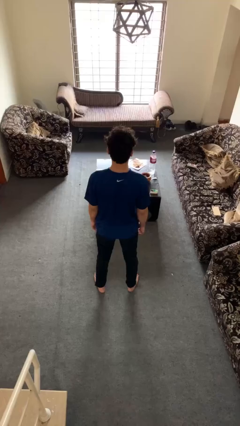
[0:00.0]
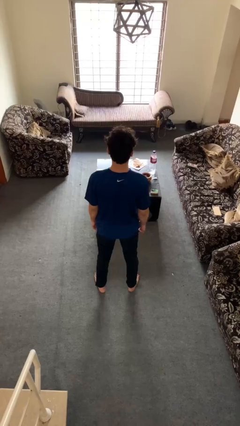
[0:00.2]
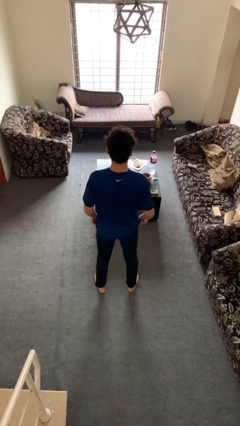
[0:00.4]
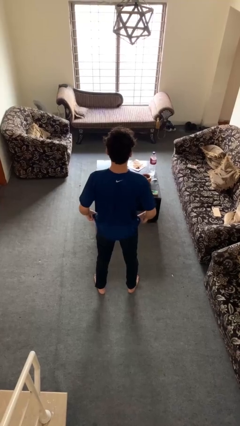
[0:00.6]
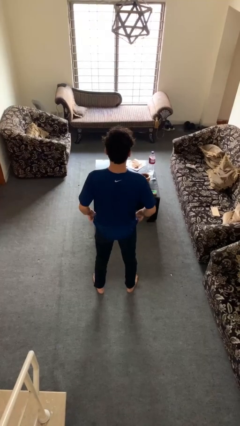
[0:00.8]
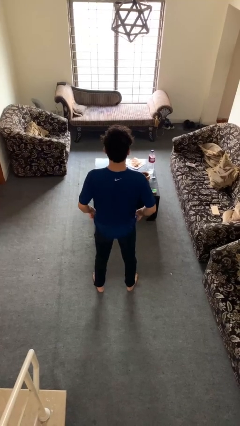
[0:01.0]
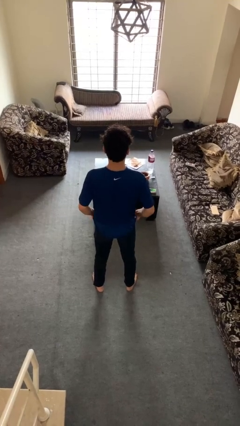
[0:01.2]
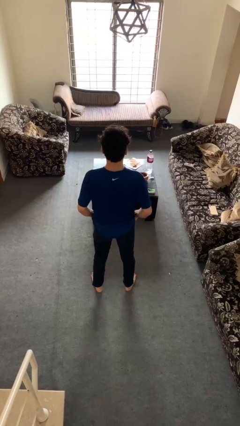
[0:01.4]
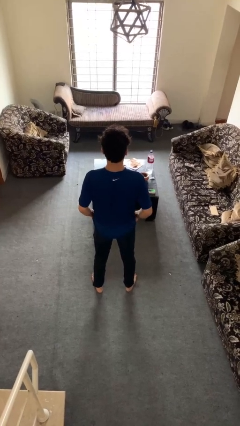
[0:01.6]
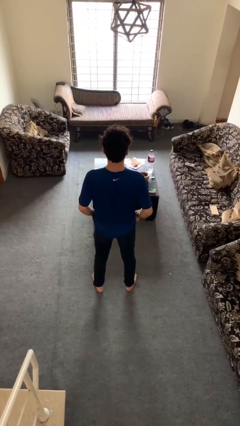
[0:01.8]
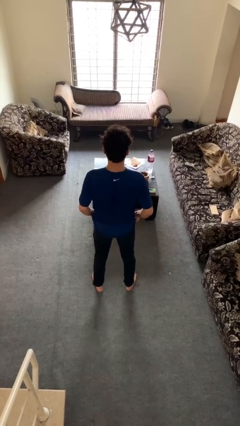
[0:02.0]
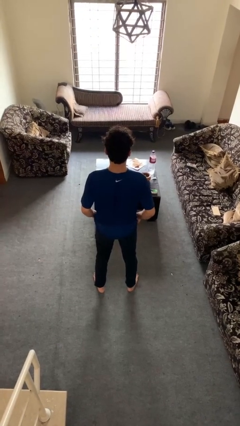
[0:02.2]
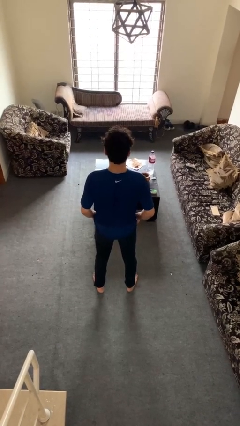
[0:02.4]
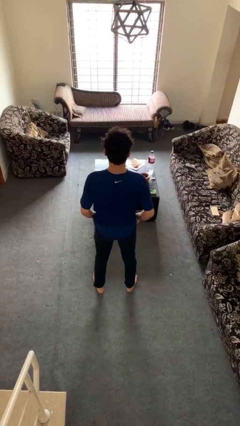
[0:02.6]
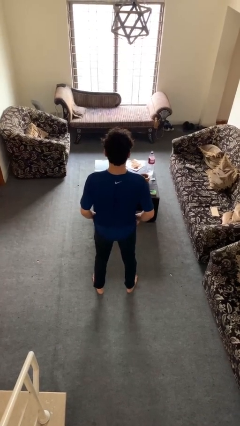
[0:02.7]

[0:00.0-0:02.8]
person puts hands in back pockets

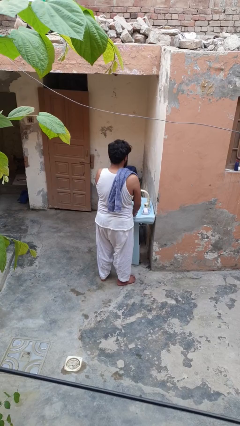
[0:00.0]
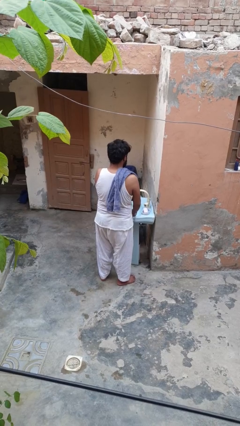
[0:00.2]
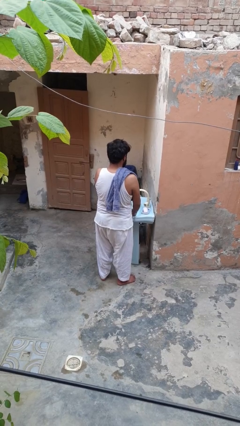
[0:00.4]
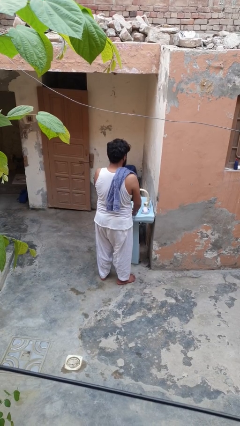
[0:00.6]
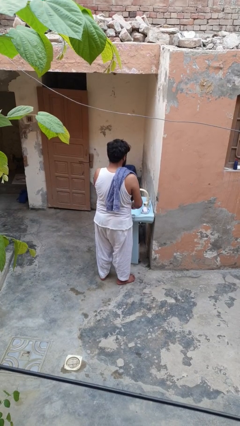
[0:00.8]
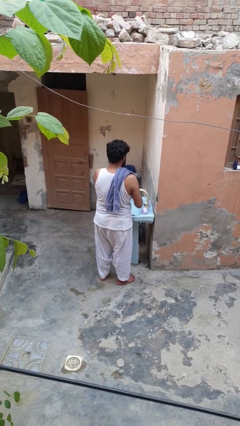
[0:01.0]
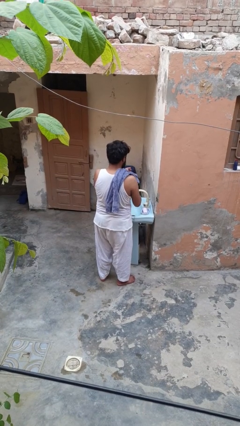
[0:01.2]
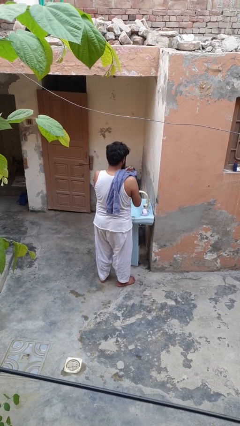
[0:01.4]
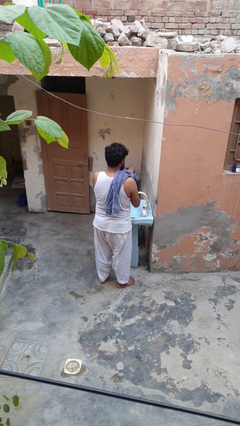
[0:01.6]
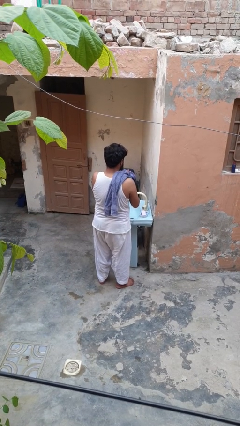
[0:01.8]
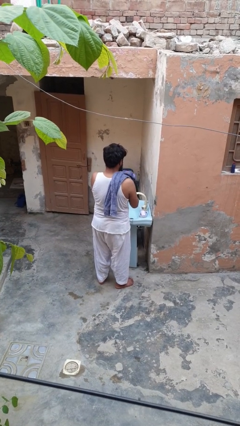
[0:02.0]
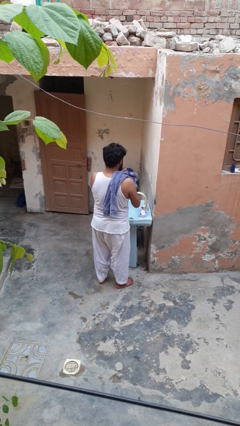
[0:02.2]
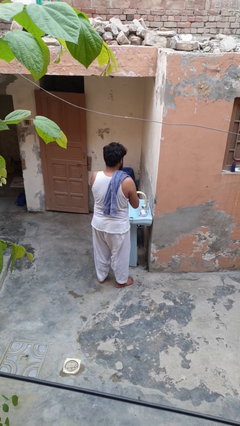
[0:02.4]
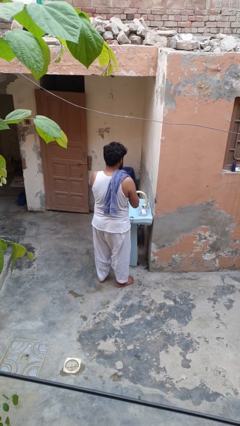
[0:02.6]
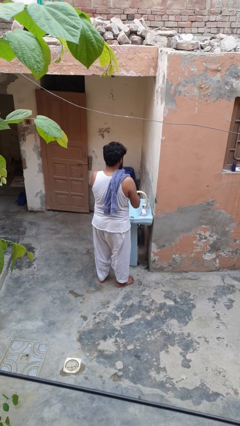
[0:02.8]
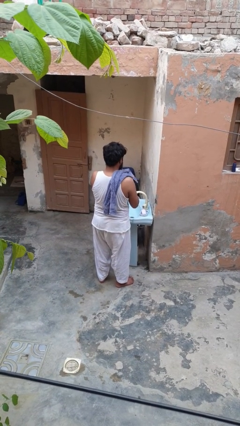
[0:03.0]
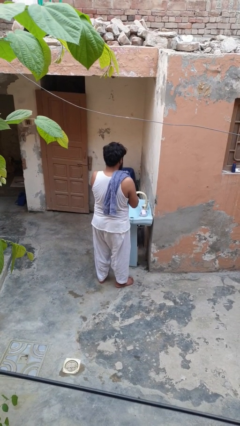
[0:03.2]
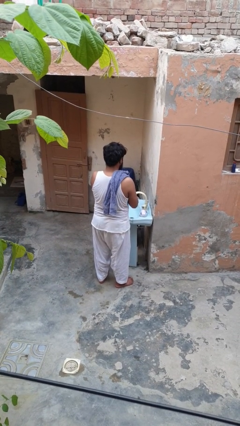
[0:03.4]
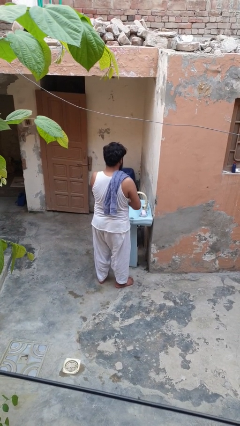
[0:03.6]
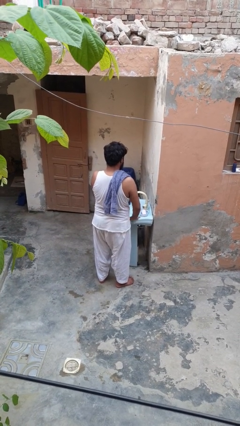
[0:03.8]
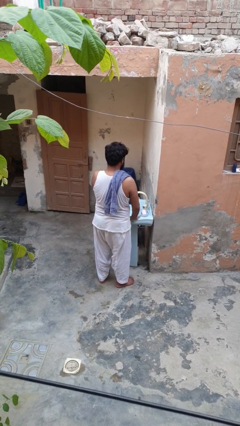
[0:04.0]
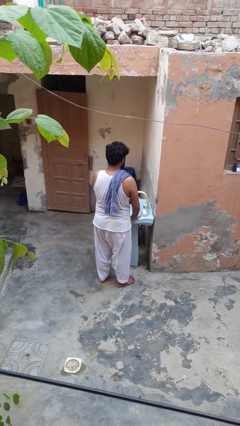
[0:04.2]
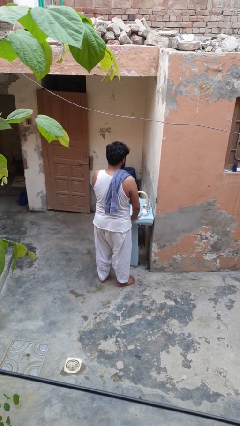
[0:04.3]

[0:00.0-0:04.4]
person dries hands with towel

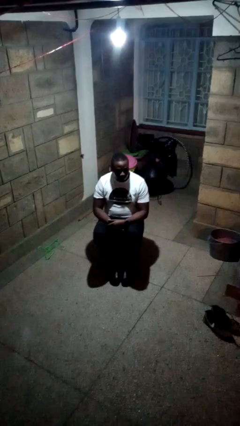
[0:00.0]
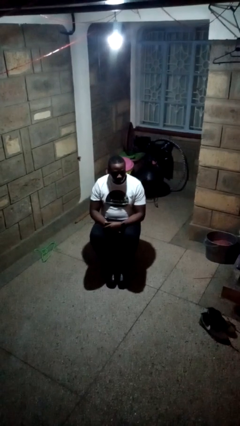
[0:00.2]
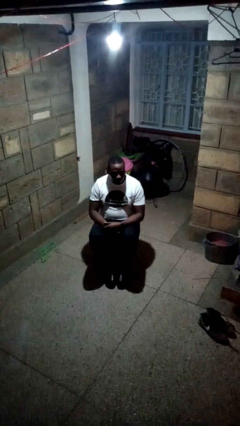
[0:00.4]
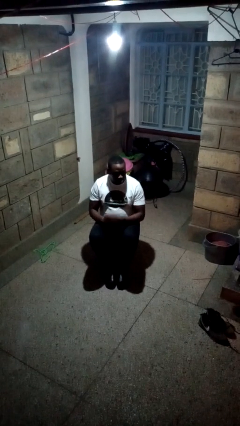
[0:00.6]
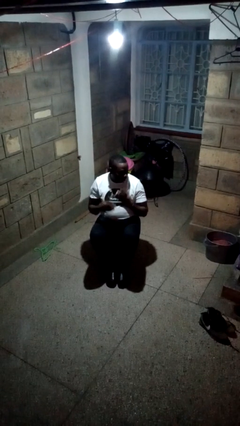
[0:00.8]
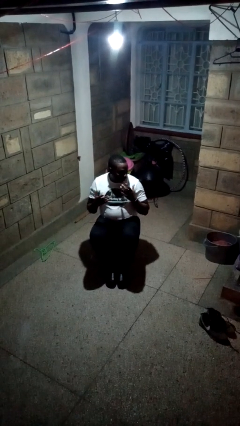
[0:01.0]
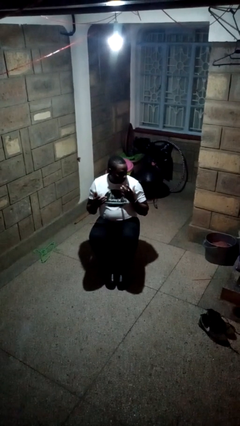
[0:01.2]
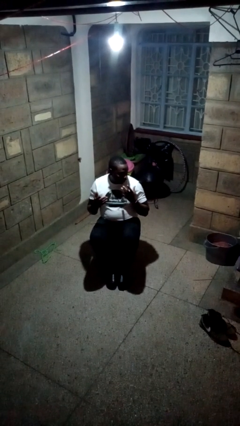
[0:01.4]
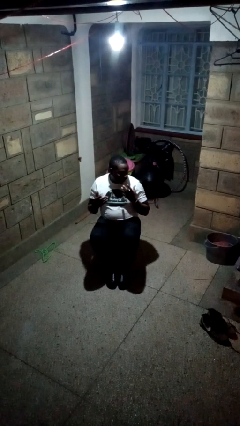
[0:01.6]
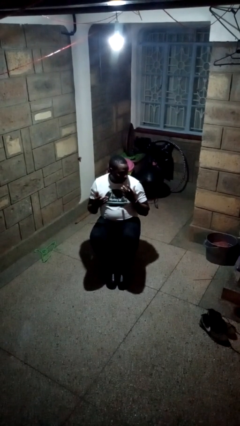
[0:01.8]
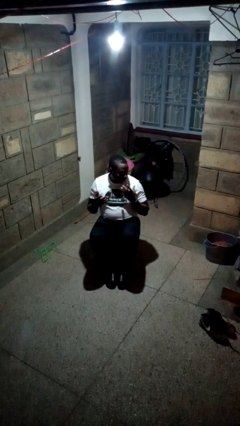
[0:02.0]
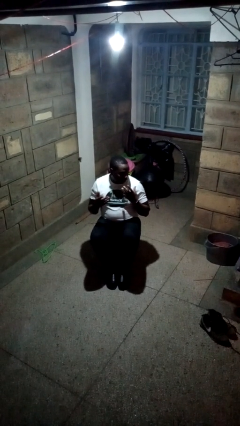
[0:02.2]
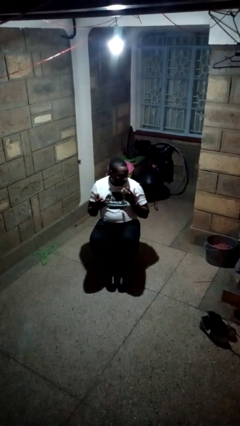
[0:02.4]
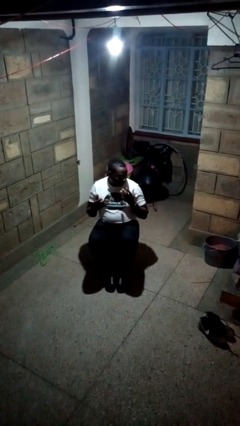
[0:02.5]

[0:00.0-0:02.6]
person shrugs

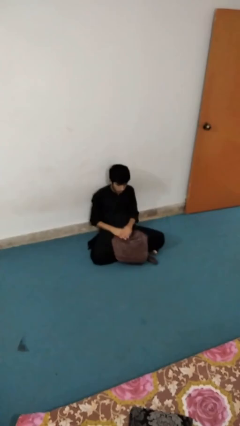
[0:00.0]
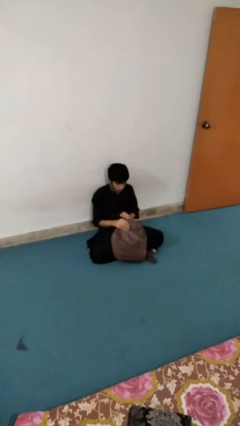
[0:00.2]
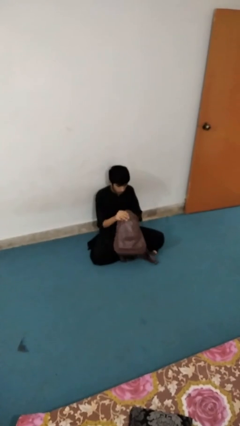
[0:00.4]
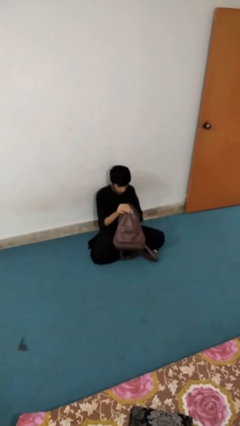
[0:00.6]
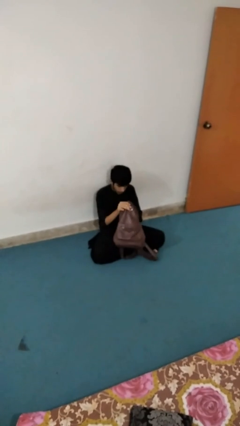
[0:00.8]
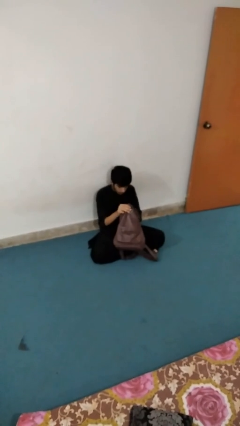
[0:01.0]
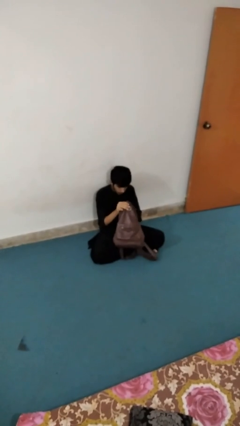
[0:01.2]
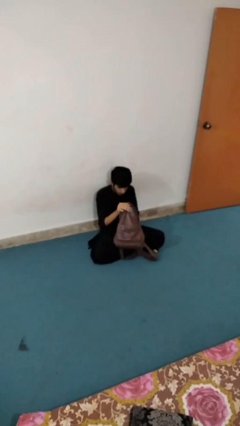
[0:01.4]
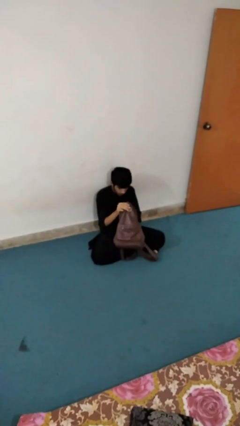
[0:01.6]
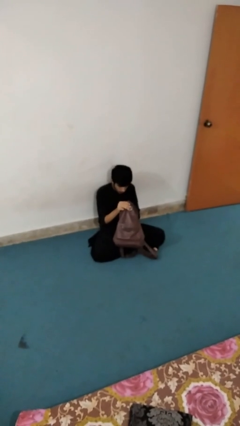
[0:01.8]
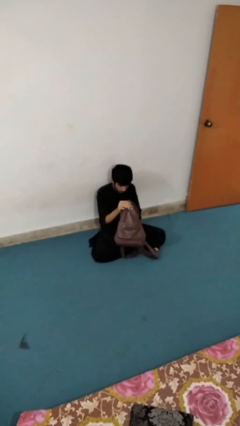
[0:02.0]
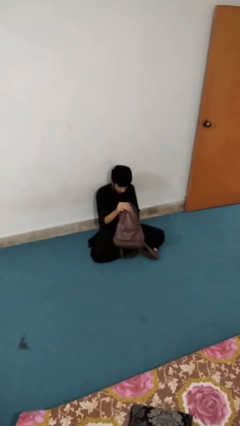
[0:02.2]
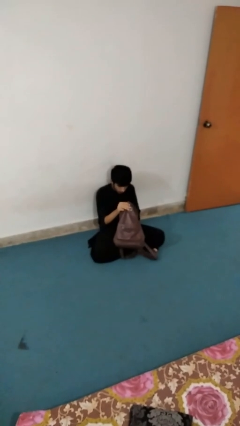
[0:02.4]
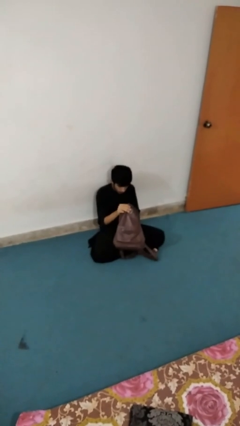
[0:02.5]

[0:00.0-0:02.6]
person searches in bag

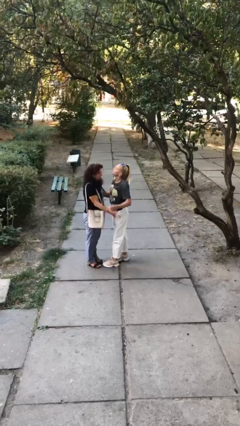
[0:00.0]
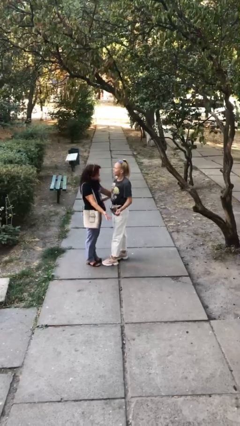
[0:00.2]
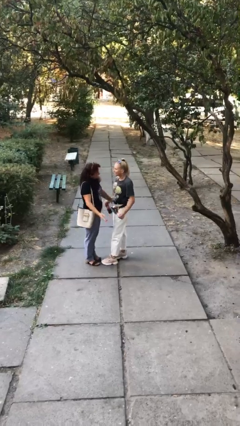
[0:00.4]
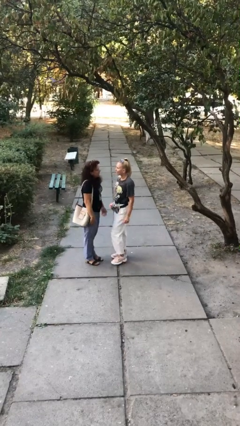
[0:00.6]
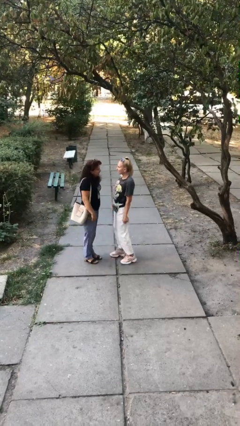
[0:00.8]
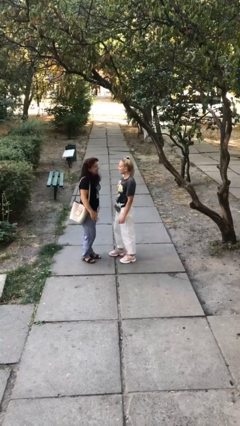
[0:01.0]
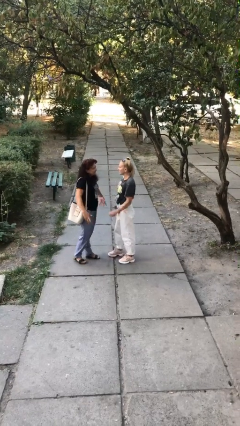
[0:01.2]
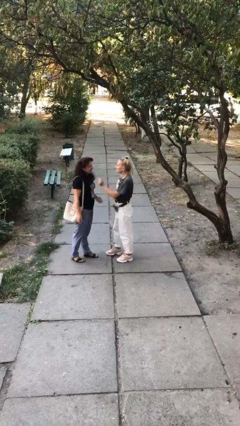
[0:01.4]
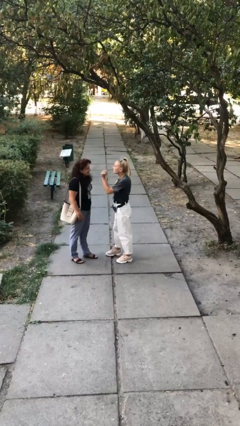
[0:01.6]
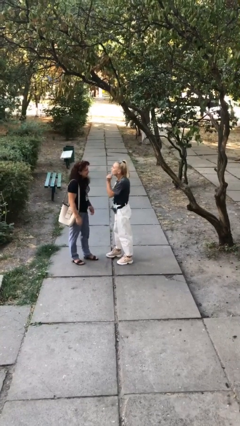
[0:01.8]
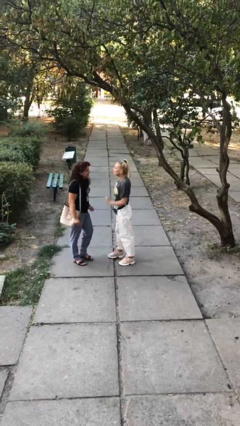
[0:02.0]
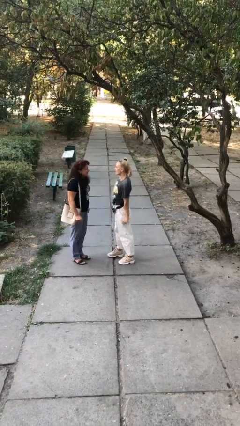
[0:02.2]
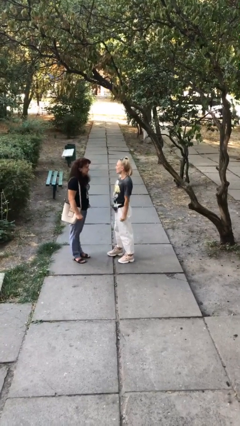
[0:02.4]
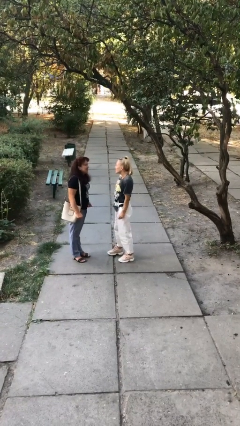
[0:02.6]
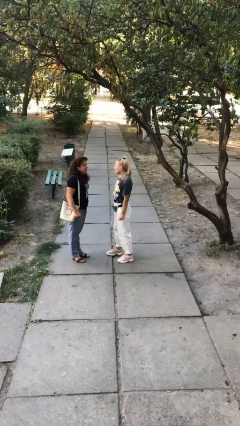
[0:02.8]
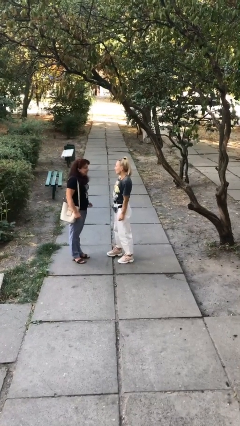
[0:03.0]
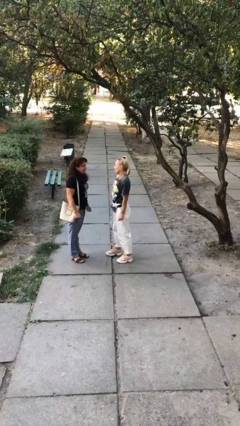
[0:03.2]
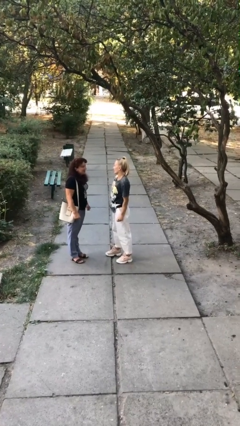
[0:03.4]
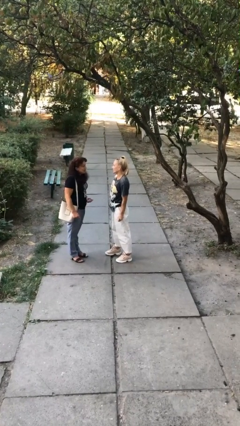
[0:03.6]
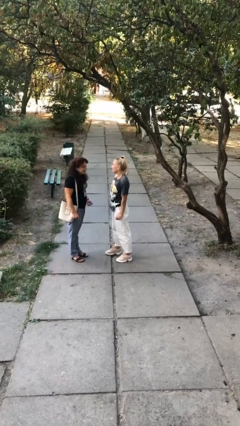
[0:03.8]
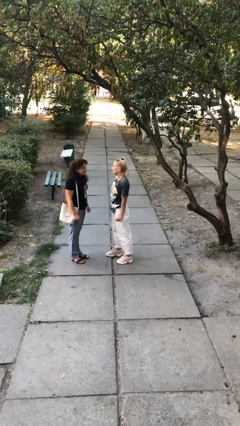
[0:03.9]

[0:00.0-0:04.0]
person talks to person

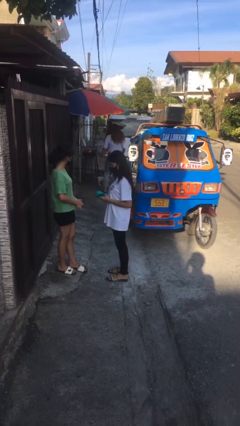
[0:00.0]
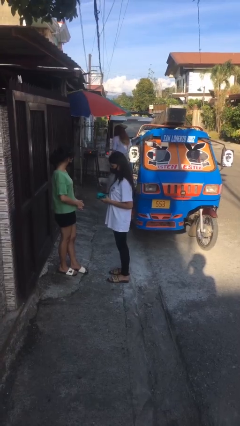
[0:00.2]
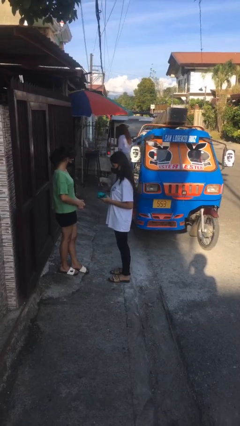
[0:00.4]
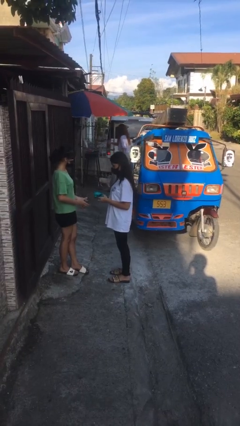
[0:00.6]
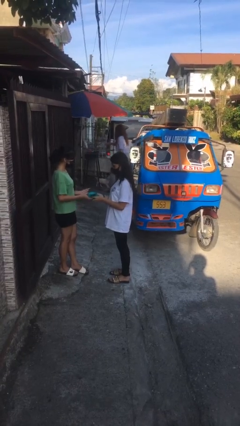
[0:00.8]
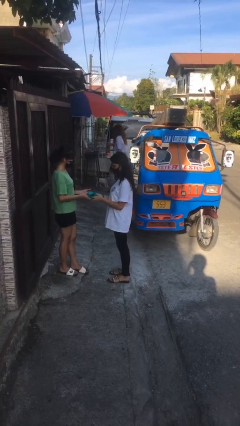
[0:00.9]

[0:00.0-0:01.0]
person transfers object to person

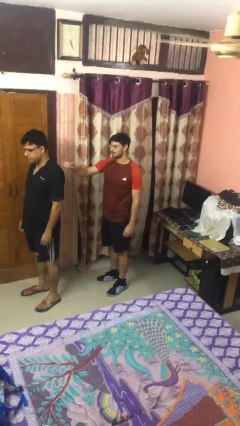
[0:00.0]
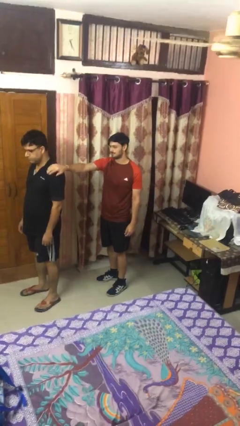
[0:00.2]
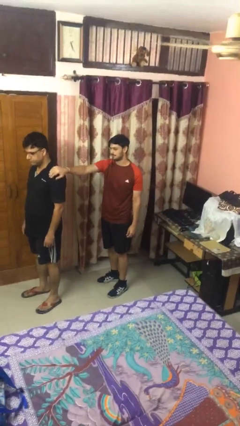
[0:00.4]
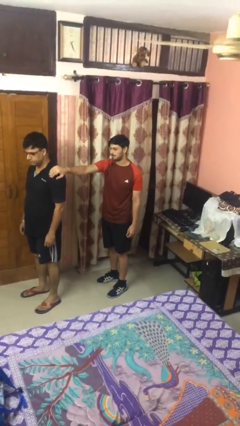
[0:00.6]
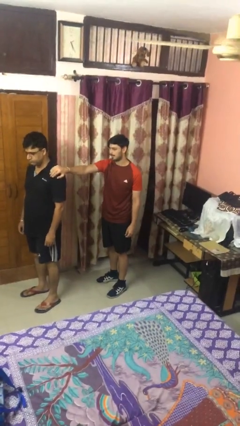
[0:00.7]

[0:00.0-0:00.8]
person grabs person by shoulder
